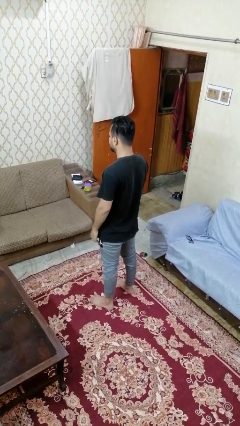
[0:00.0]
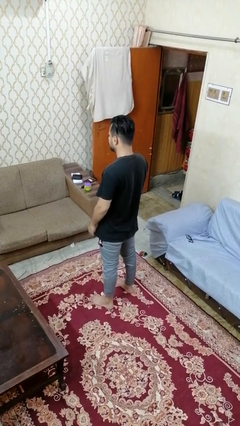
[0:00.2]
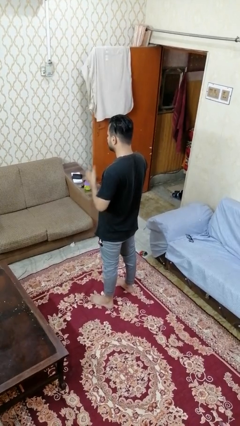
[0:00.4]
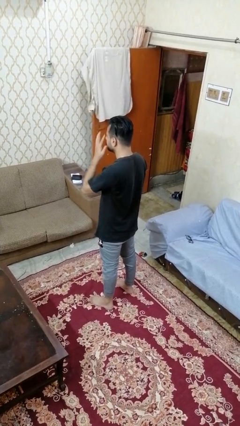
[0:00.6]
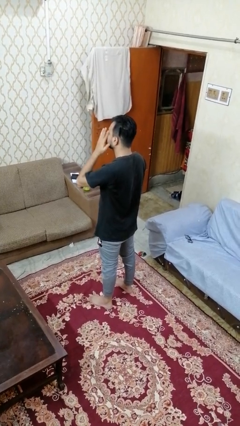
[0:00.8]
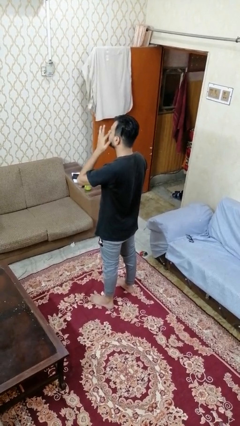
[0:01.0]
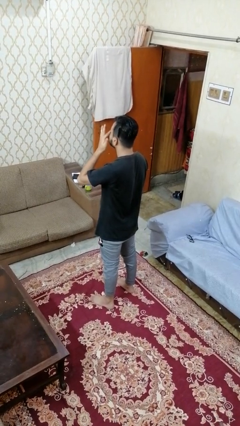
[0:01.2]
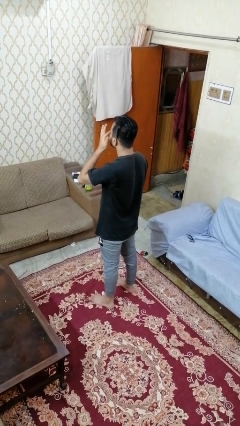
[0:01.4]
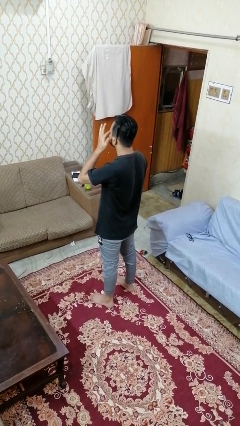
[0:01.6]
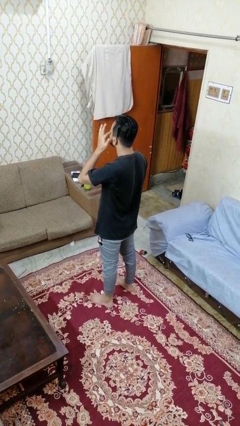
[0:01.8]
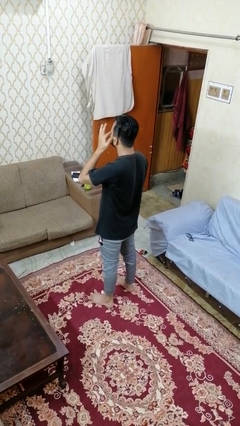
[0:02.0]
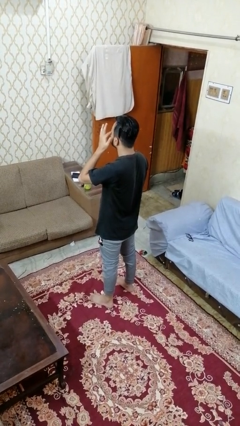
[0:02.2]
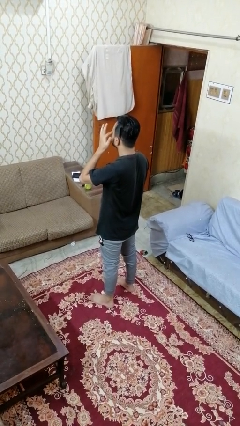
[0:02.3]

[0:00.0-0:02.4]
person rubs eyes

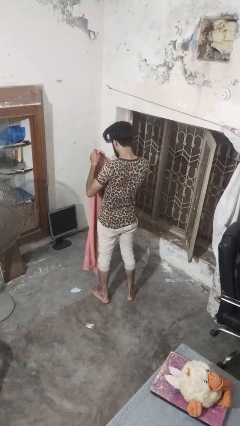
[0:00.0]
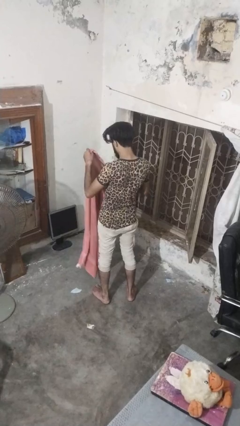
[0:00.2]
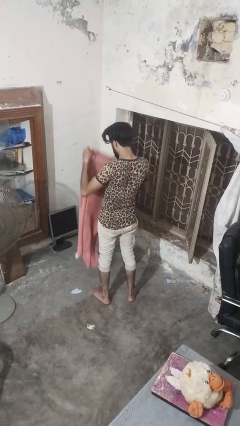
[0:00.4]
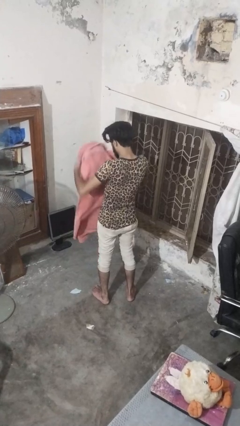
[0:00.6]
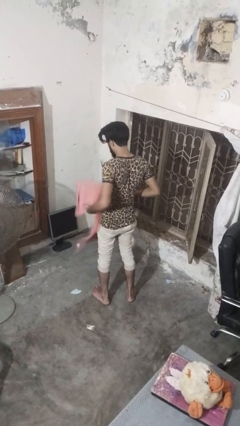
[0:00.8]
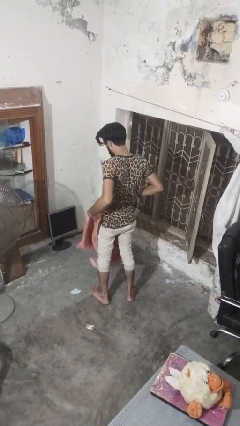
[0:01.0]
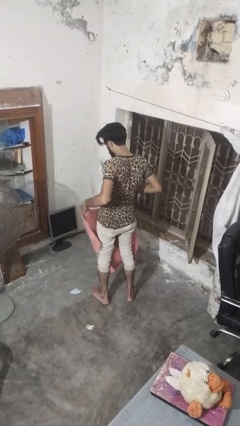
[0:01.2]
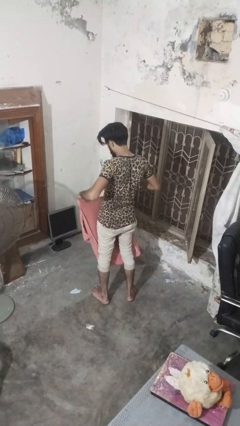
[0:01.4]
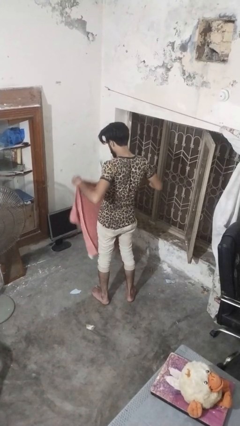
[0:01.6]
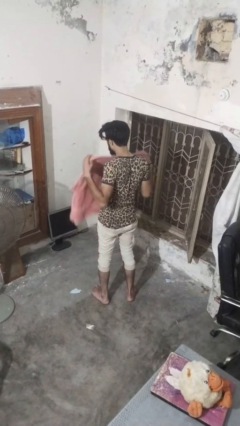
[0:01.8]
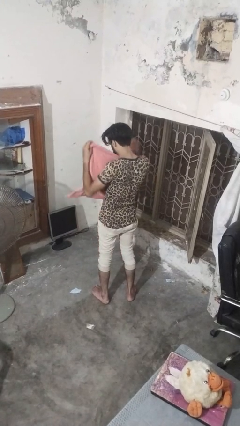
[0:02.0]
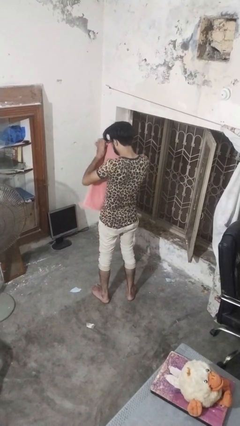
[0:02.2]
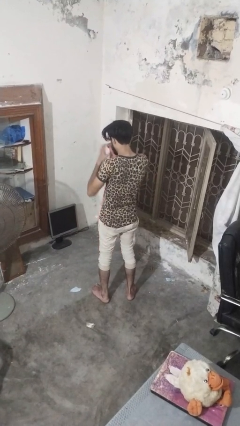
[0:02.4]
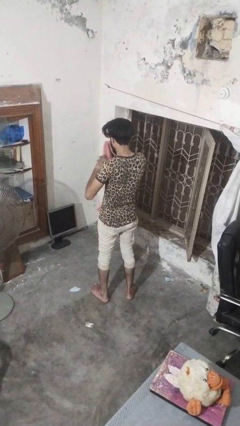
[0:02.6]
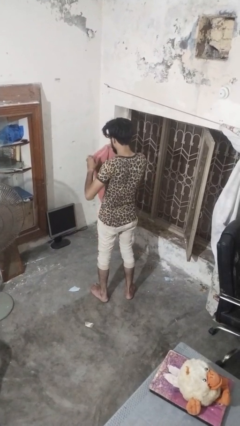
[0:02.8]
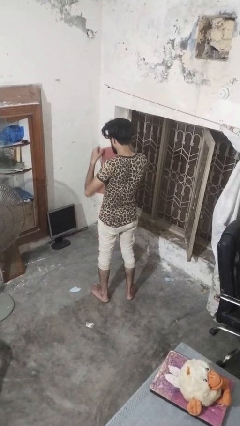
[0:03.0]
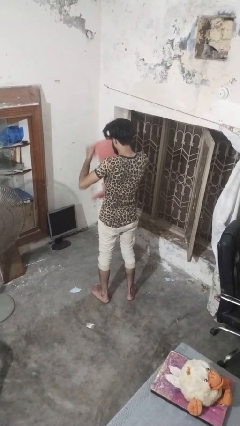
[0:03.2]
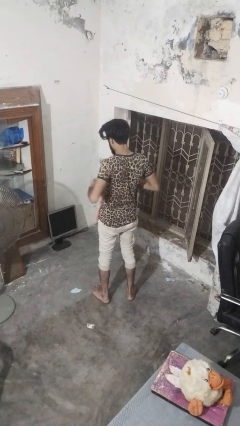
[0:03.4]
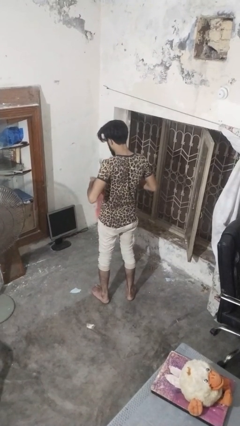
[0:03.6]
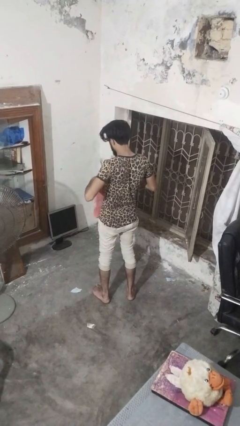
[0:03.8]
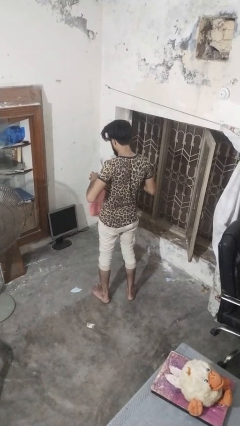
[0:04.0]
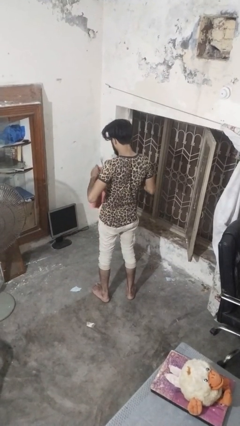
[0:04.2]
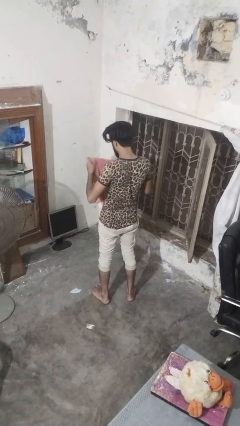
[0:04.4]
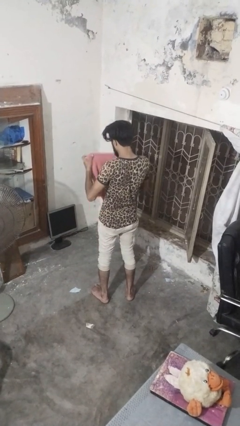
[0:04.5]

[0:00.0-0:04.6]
person folds towel

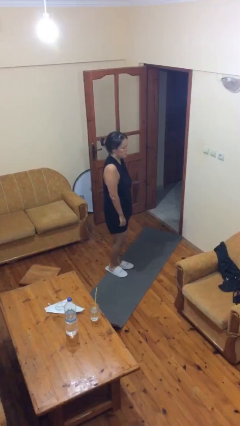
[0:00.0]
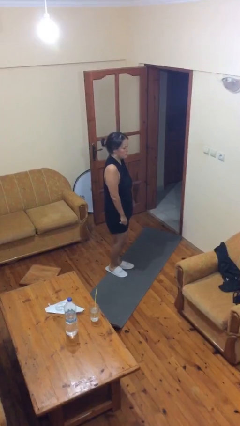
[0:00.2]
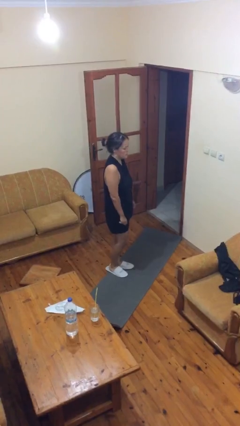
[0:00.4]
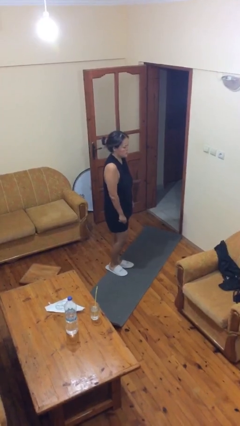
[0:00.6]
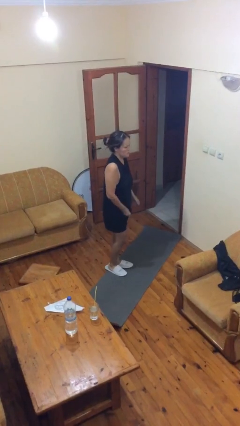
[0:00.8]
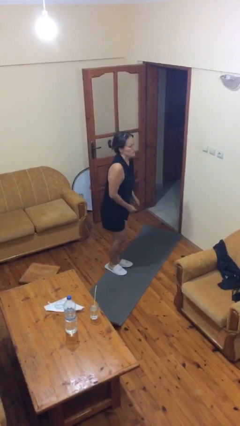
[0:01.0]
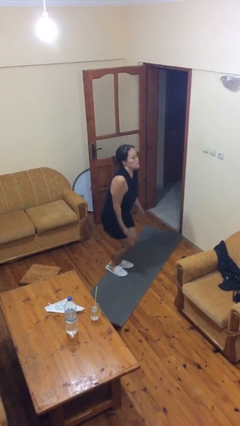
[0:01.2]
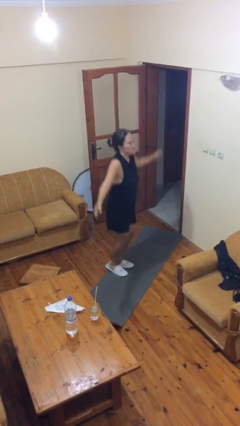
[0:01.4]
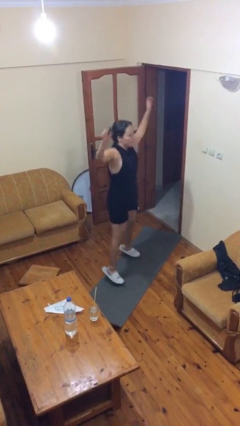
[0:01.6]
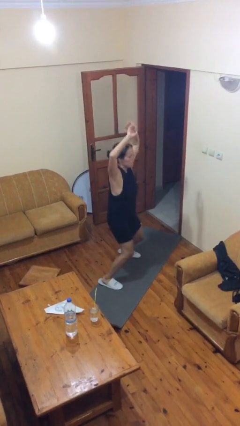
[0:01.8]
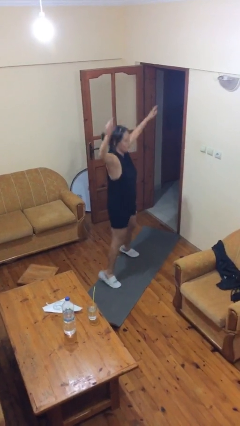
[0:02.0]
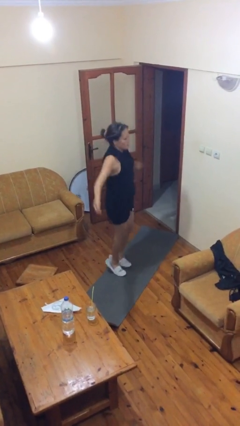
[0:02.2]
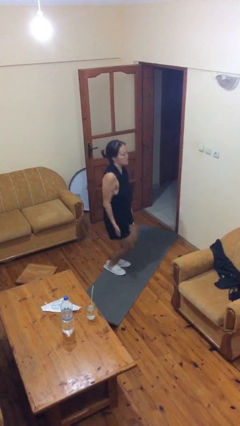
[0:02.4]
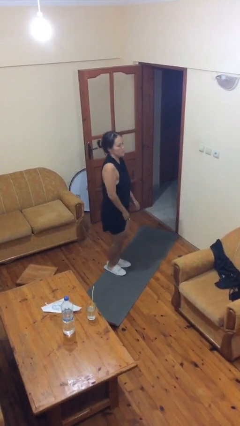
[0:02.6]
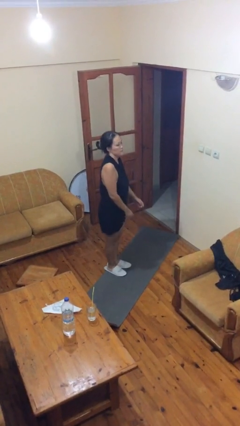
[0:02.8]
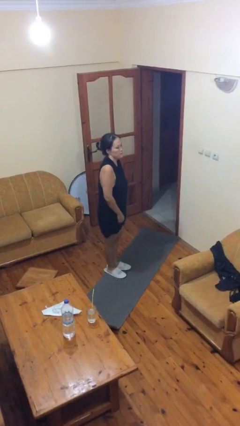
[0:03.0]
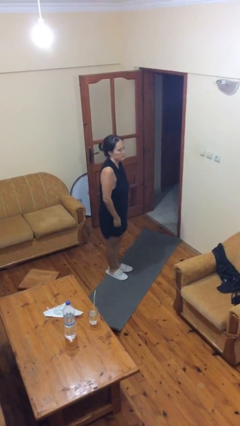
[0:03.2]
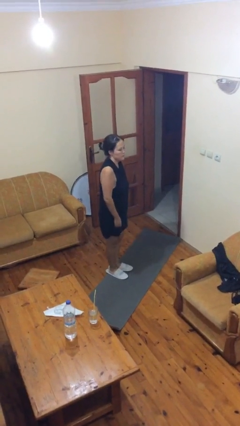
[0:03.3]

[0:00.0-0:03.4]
person exercises with jumping jacks

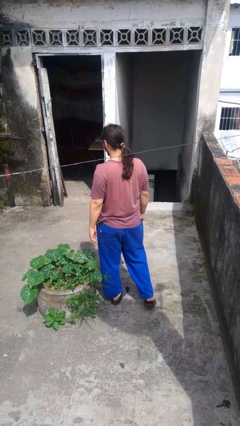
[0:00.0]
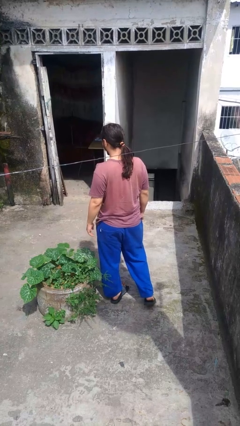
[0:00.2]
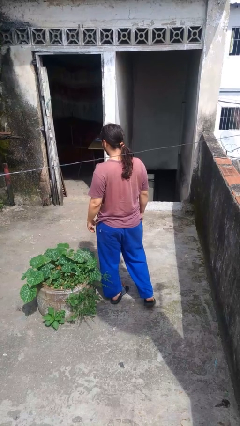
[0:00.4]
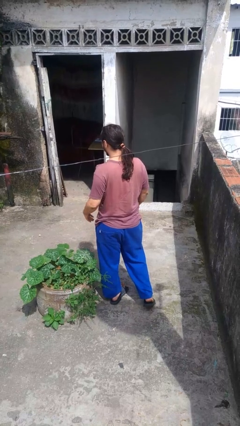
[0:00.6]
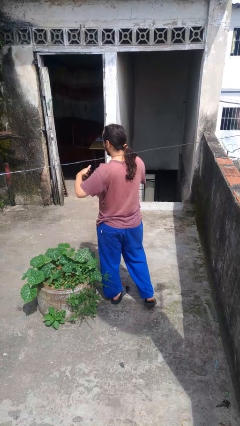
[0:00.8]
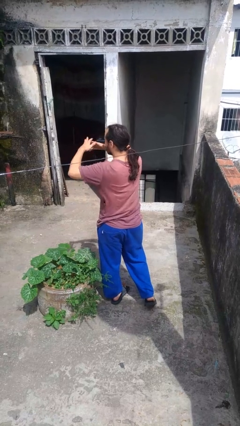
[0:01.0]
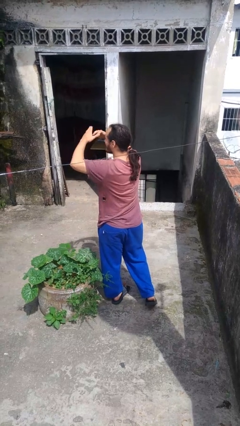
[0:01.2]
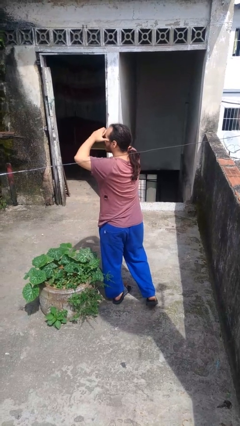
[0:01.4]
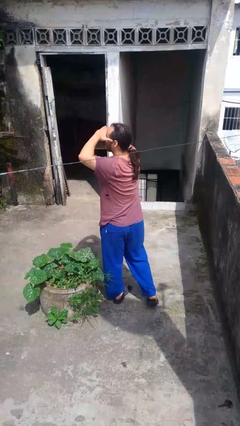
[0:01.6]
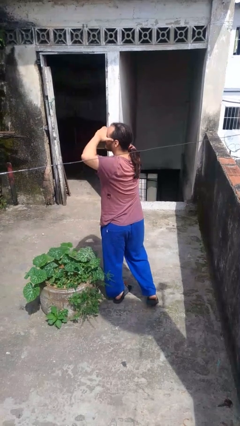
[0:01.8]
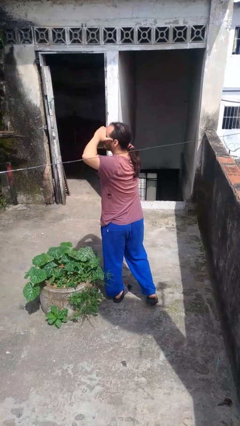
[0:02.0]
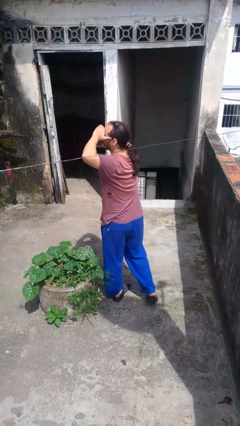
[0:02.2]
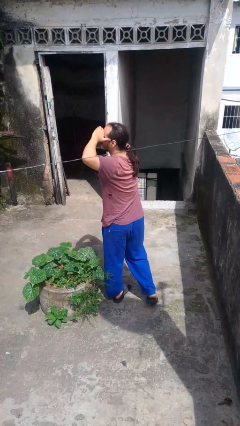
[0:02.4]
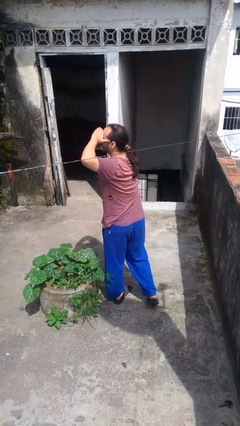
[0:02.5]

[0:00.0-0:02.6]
person shades eyes

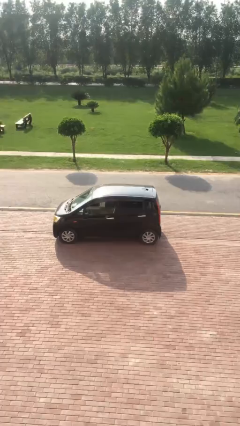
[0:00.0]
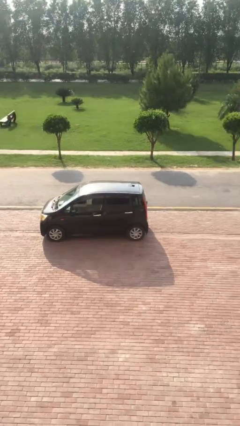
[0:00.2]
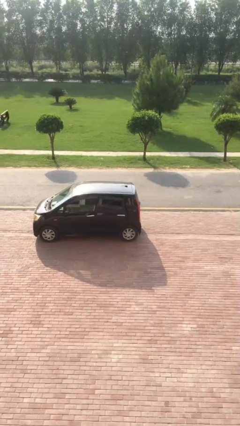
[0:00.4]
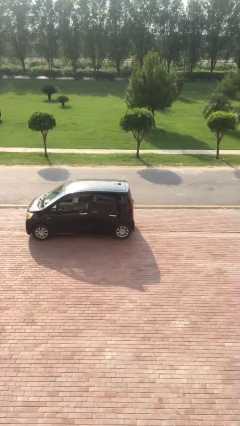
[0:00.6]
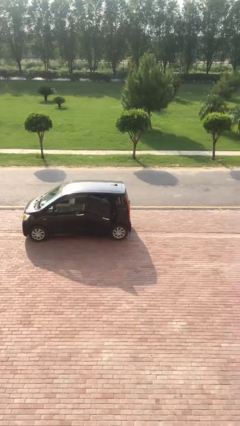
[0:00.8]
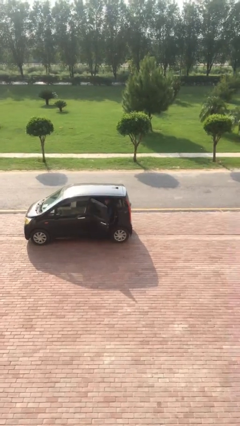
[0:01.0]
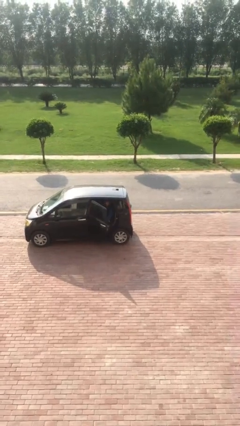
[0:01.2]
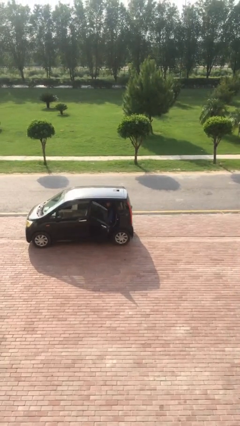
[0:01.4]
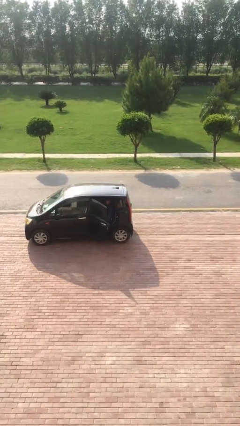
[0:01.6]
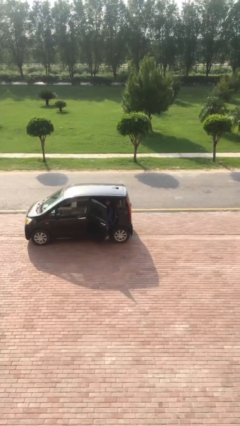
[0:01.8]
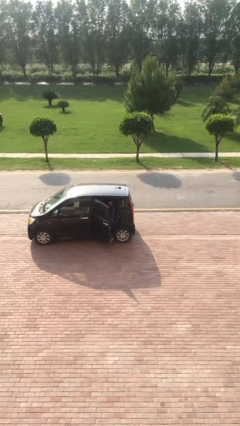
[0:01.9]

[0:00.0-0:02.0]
person opens car door

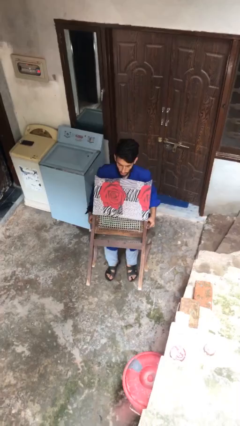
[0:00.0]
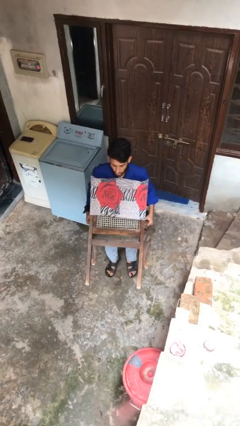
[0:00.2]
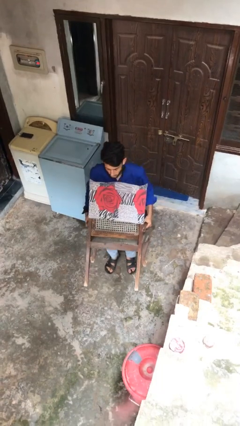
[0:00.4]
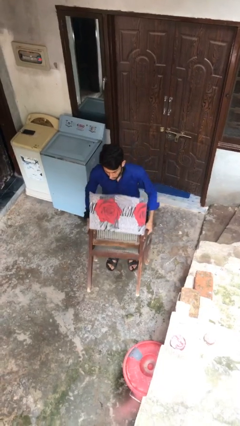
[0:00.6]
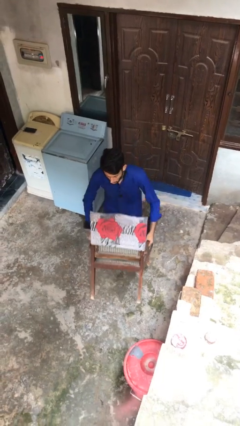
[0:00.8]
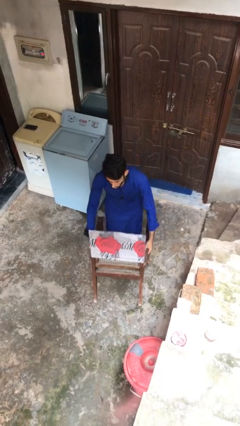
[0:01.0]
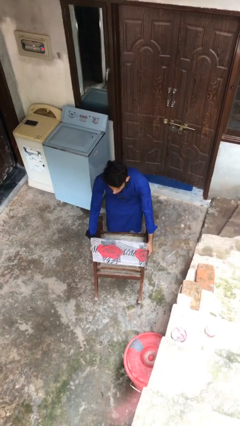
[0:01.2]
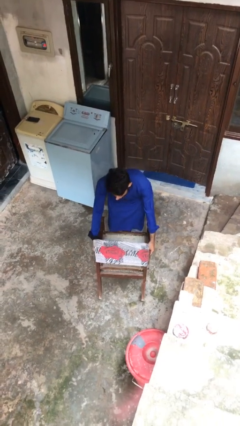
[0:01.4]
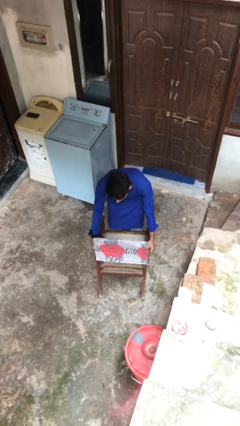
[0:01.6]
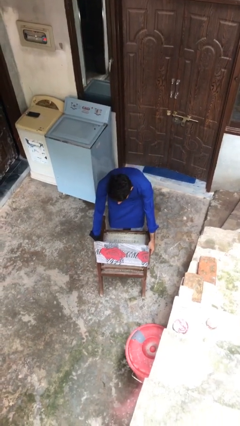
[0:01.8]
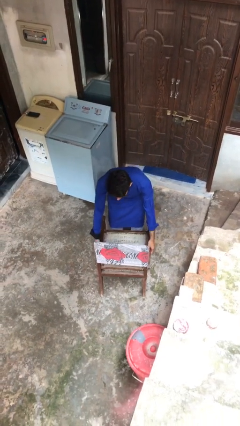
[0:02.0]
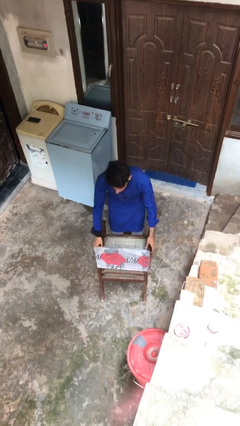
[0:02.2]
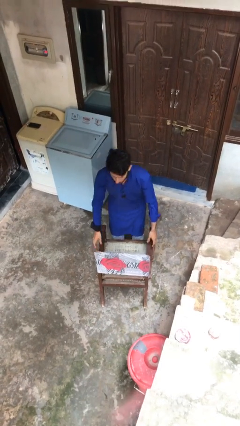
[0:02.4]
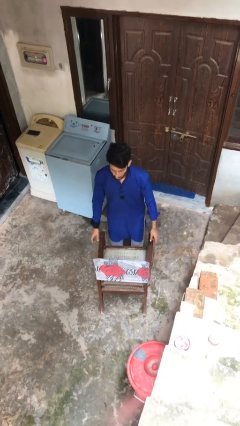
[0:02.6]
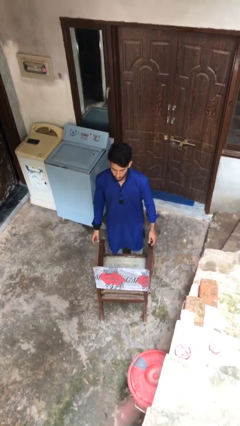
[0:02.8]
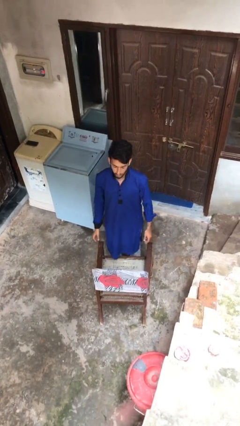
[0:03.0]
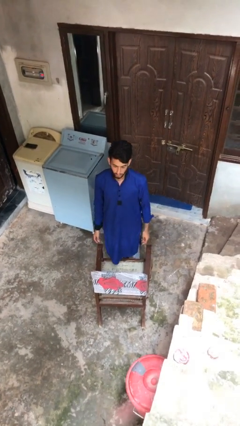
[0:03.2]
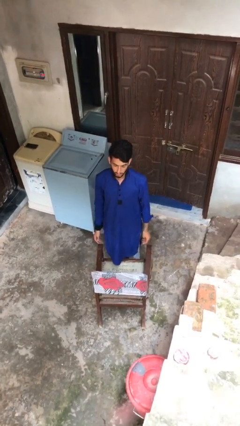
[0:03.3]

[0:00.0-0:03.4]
person puts down object on floor
